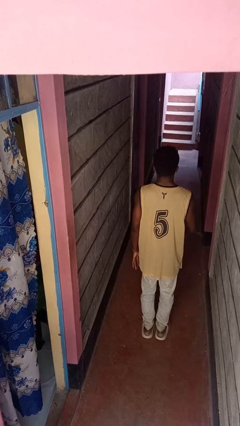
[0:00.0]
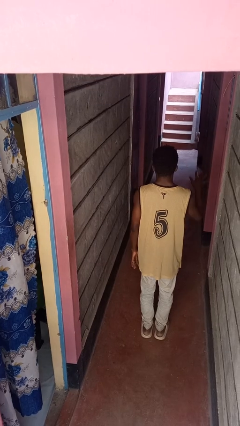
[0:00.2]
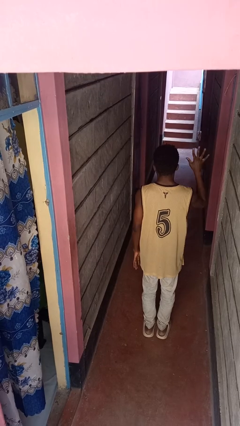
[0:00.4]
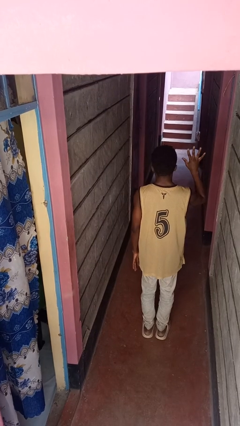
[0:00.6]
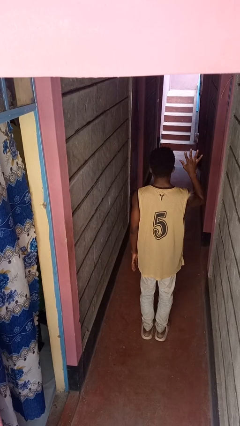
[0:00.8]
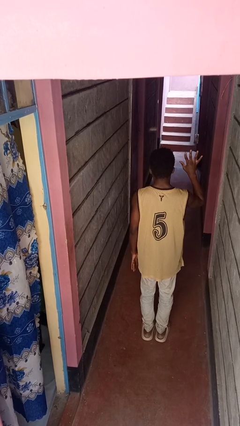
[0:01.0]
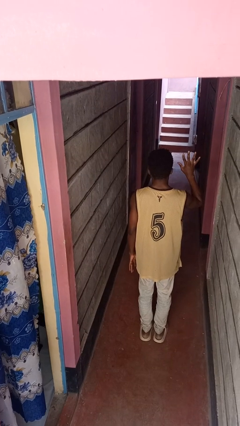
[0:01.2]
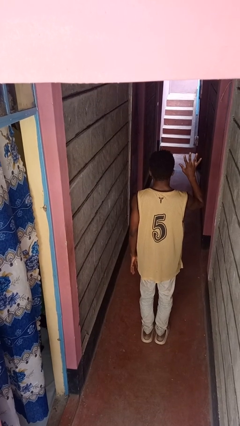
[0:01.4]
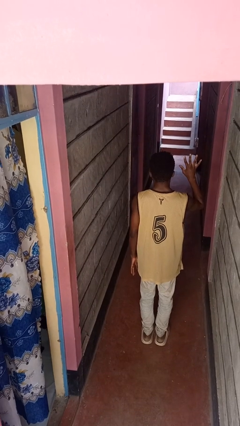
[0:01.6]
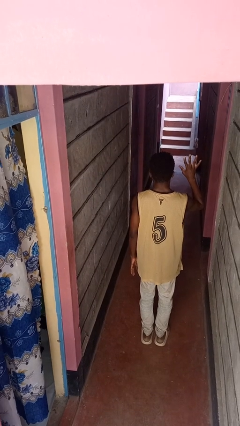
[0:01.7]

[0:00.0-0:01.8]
person gestures number five

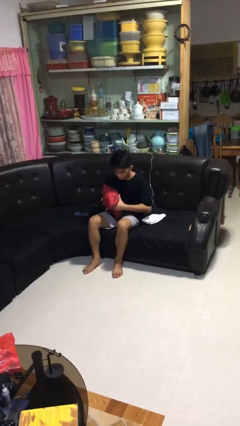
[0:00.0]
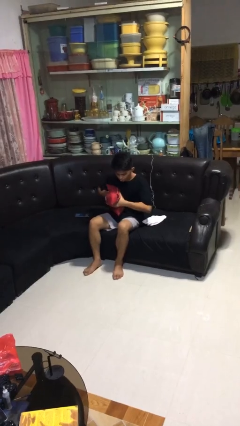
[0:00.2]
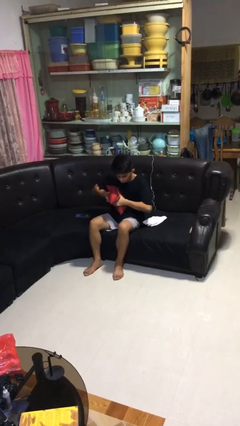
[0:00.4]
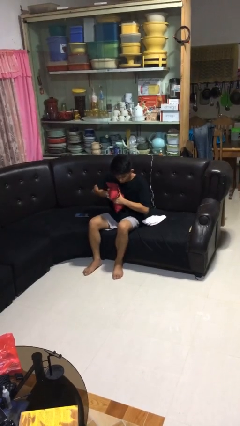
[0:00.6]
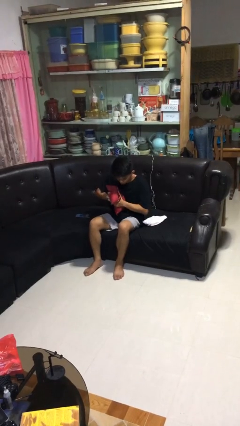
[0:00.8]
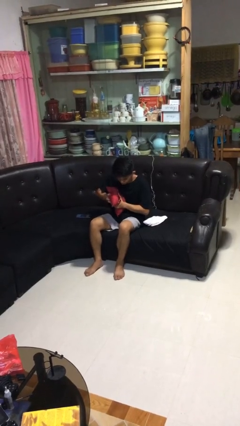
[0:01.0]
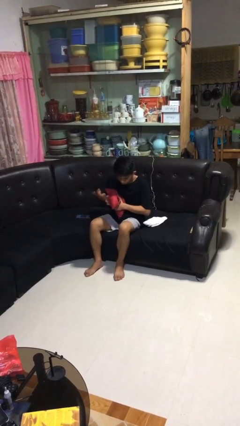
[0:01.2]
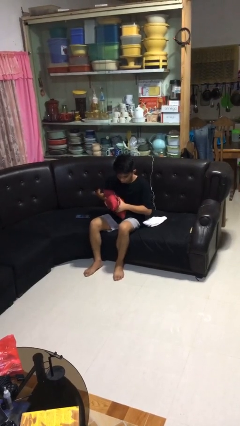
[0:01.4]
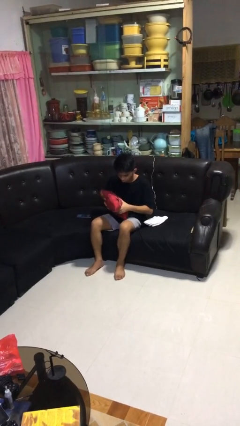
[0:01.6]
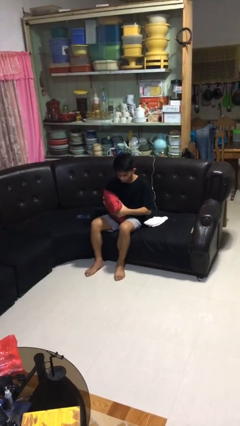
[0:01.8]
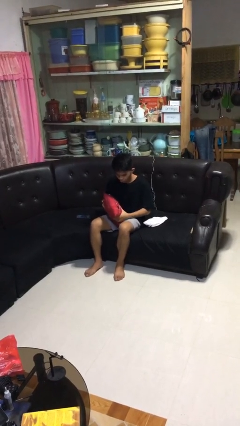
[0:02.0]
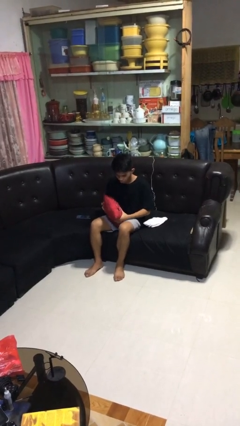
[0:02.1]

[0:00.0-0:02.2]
person squeezes object

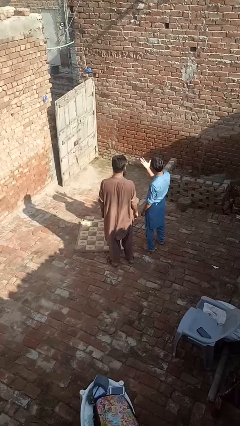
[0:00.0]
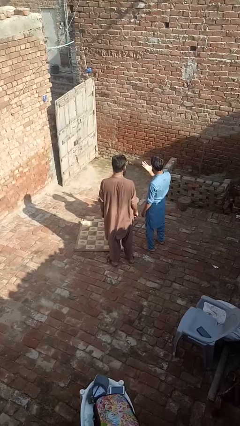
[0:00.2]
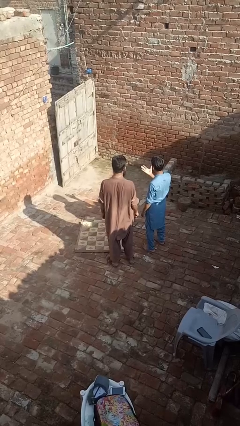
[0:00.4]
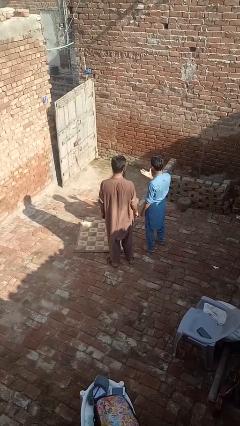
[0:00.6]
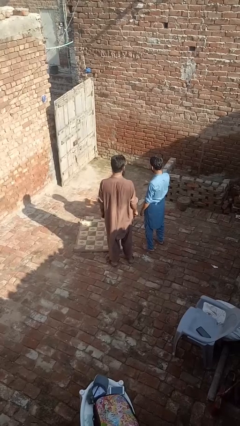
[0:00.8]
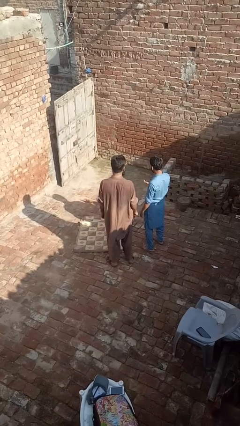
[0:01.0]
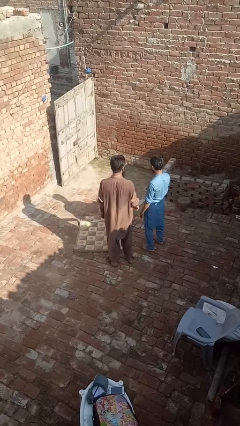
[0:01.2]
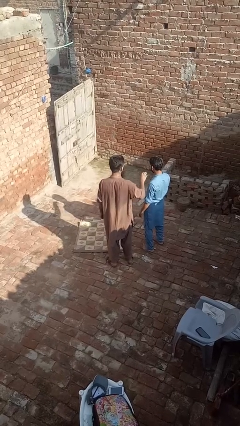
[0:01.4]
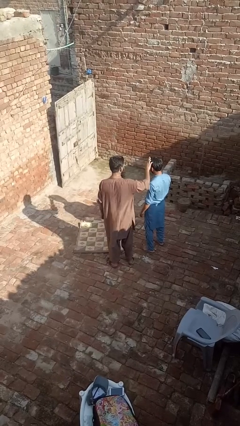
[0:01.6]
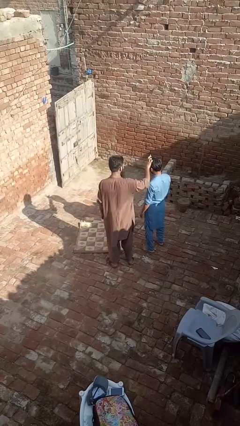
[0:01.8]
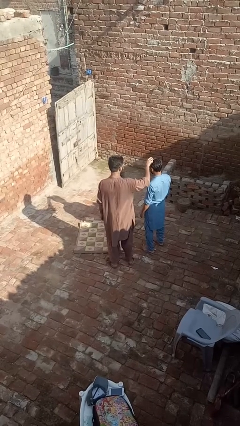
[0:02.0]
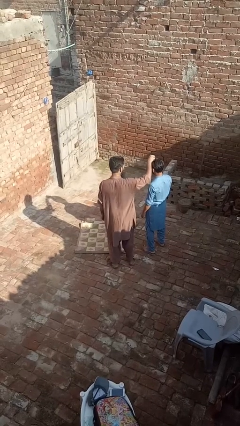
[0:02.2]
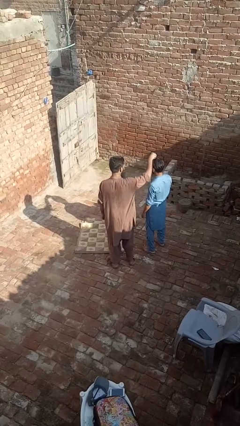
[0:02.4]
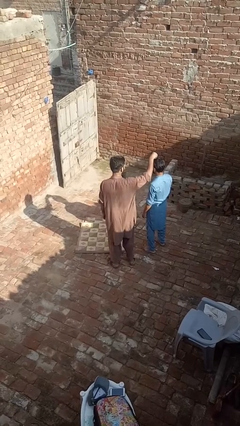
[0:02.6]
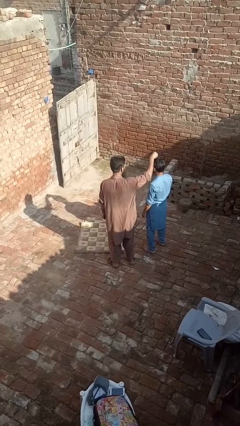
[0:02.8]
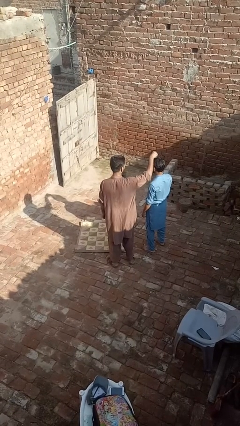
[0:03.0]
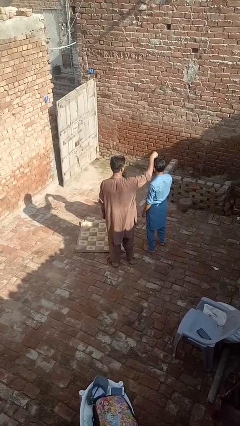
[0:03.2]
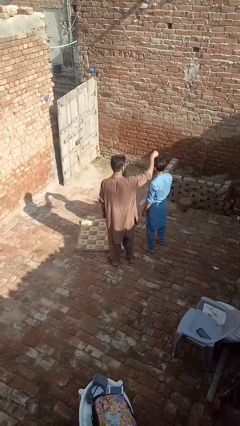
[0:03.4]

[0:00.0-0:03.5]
person grabs person by hair

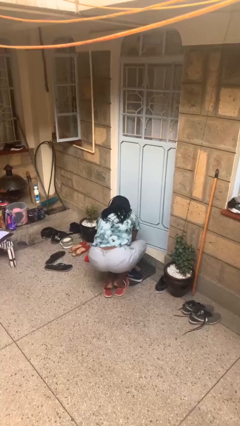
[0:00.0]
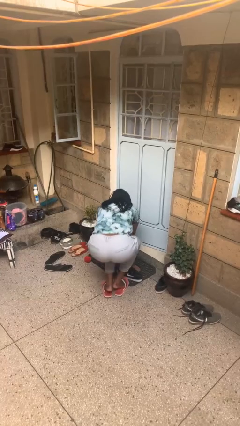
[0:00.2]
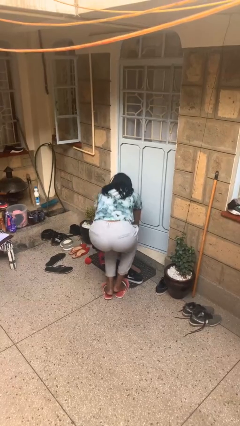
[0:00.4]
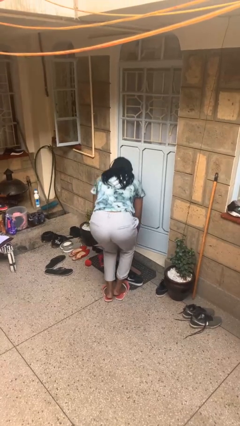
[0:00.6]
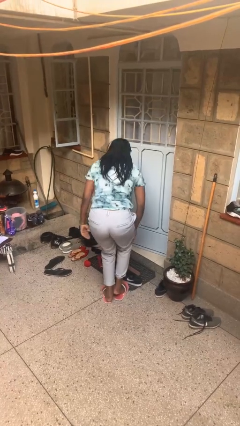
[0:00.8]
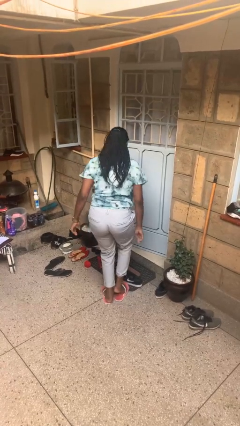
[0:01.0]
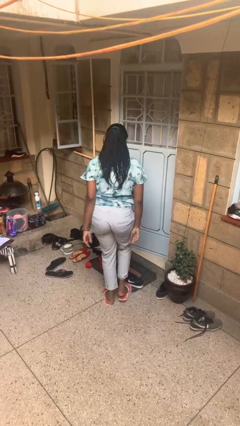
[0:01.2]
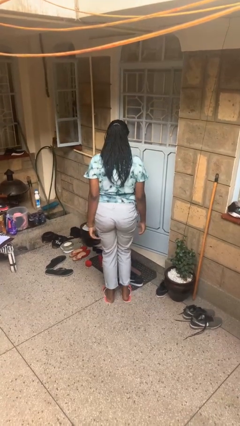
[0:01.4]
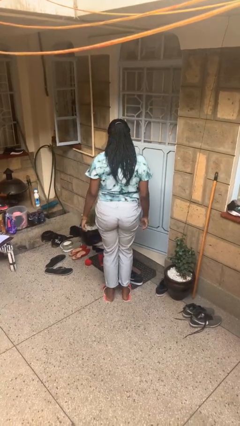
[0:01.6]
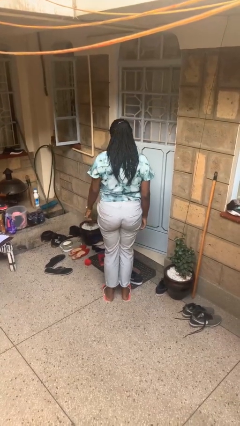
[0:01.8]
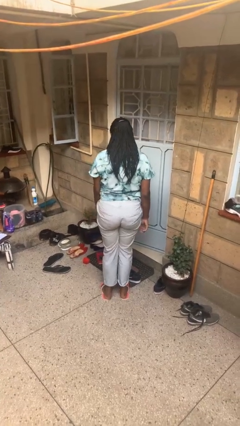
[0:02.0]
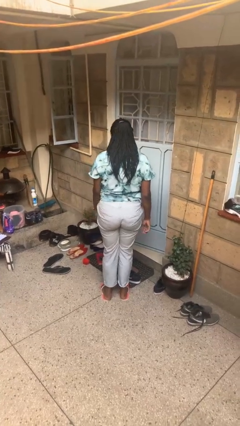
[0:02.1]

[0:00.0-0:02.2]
person stands up from floor

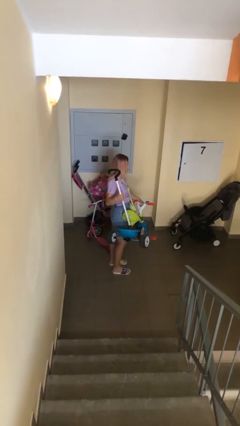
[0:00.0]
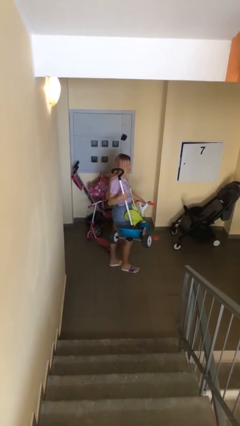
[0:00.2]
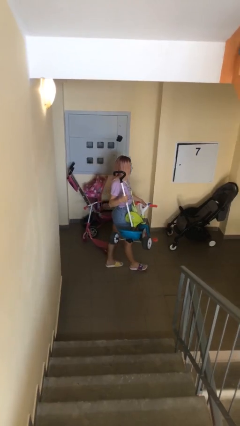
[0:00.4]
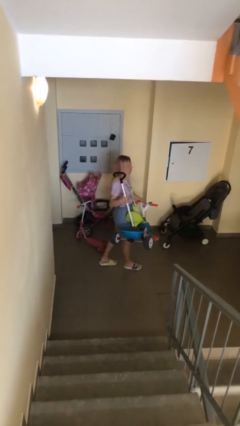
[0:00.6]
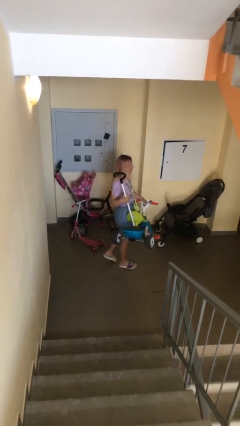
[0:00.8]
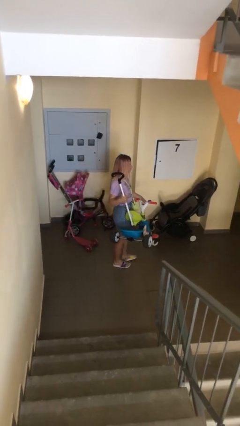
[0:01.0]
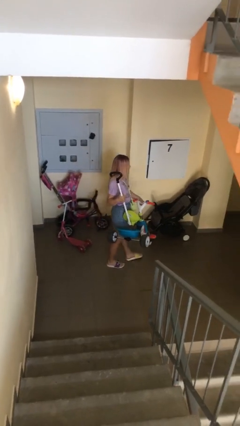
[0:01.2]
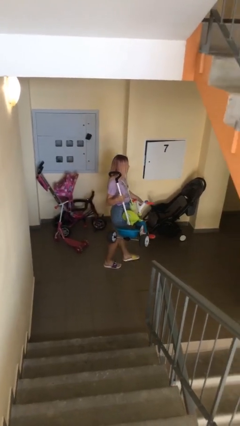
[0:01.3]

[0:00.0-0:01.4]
person carries bicycle

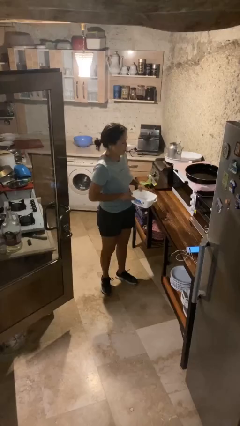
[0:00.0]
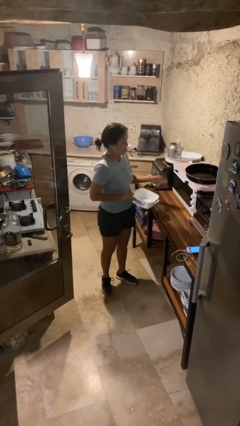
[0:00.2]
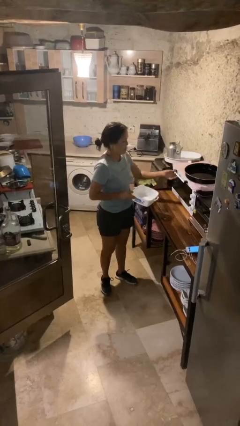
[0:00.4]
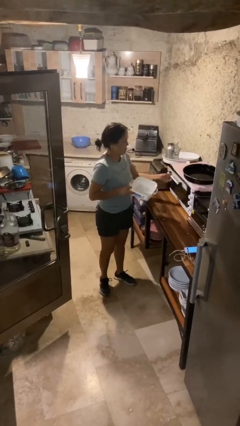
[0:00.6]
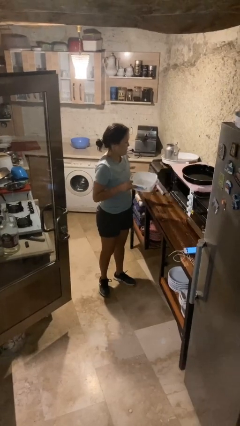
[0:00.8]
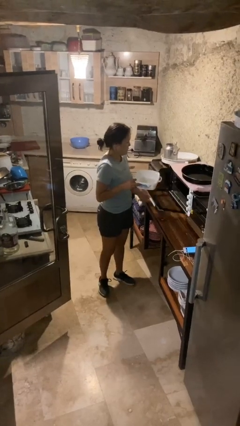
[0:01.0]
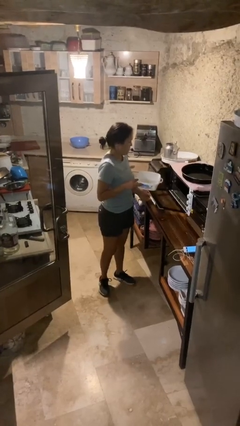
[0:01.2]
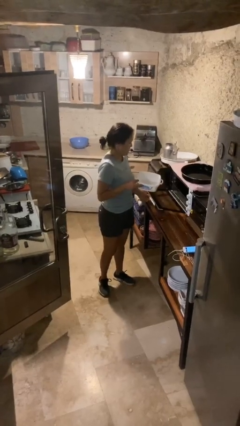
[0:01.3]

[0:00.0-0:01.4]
person opens microwave

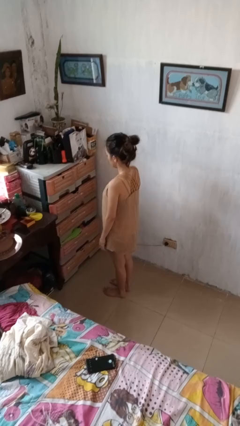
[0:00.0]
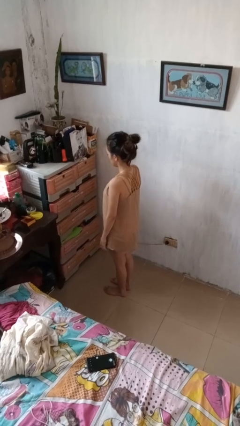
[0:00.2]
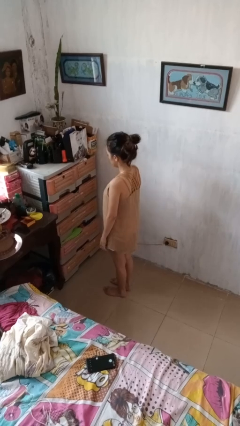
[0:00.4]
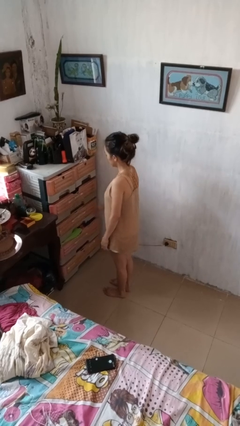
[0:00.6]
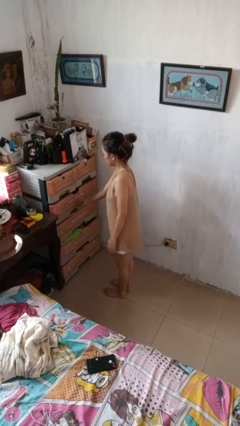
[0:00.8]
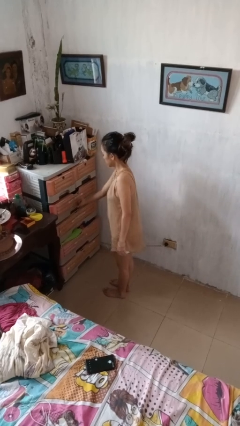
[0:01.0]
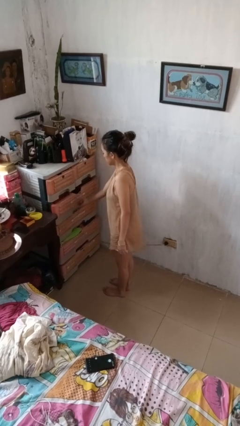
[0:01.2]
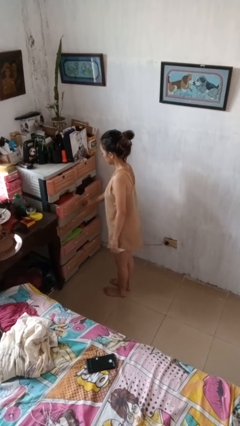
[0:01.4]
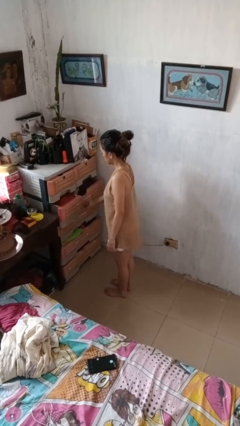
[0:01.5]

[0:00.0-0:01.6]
person opens dresser drawer

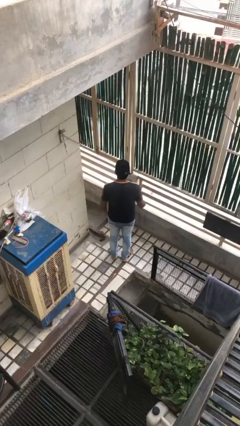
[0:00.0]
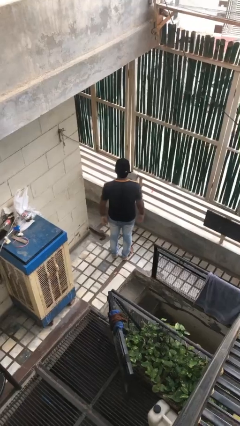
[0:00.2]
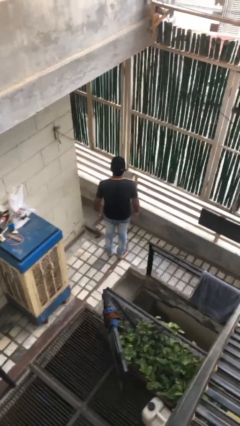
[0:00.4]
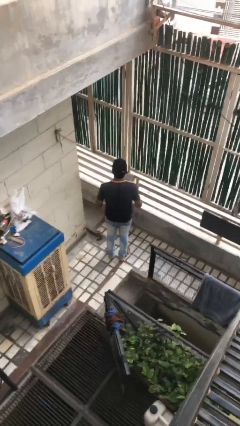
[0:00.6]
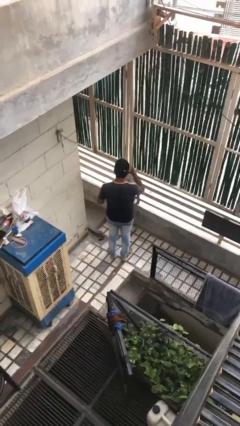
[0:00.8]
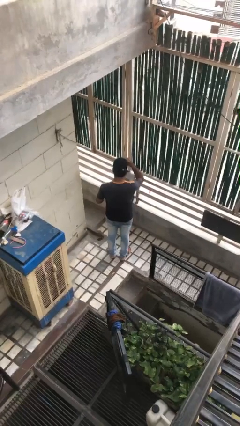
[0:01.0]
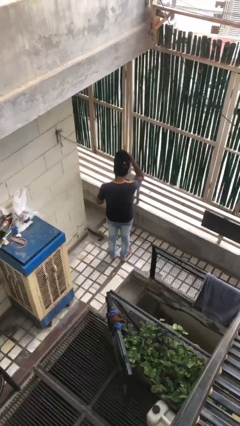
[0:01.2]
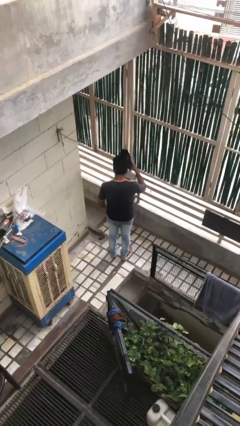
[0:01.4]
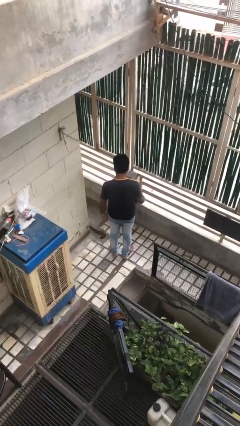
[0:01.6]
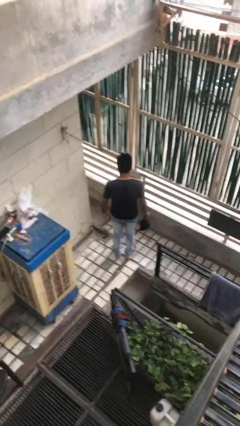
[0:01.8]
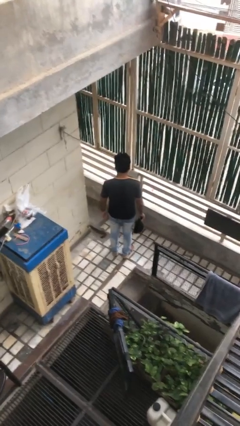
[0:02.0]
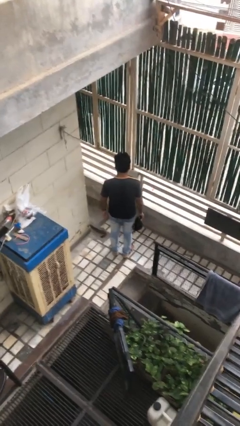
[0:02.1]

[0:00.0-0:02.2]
person takes off hat
